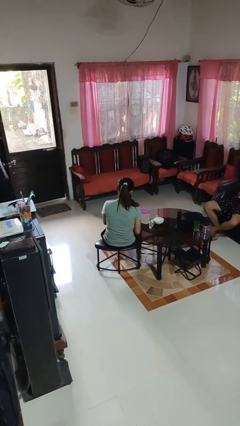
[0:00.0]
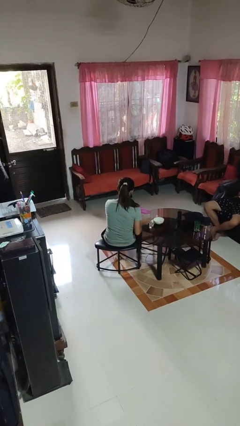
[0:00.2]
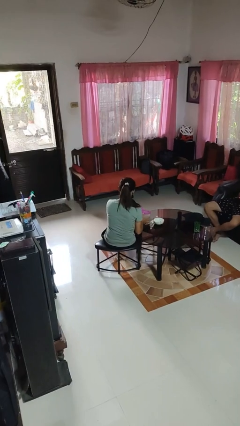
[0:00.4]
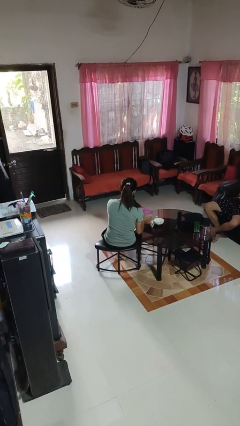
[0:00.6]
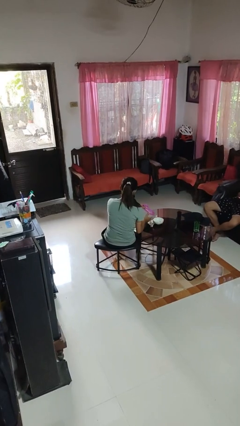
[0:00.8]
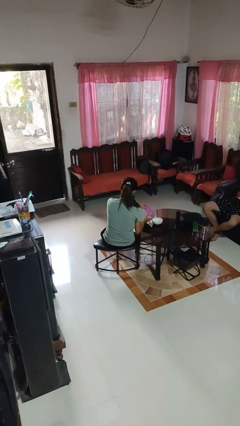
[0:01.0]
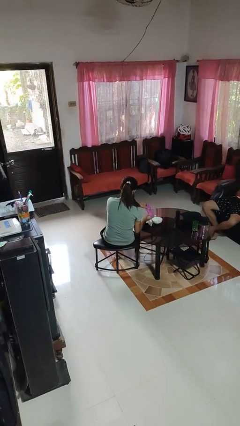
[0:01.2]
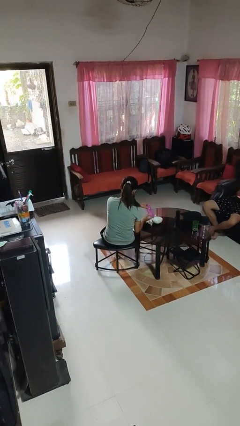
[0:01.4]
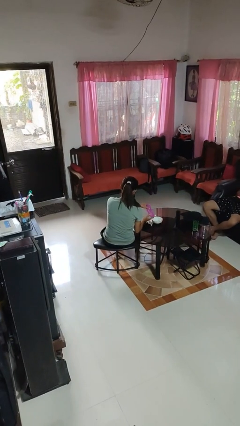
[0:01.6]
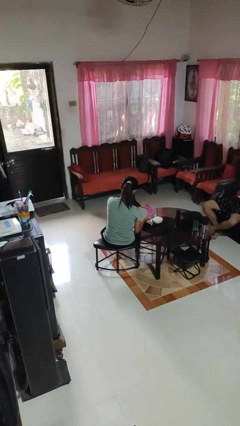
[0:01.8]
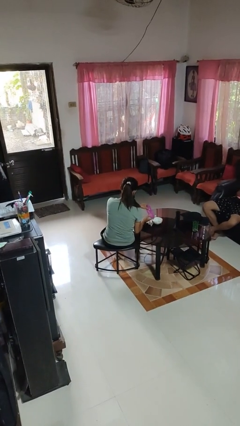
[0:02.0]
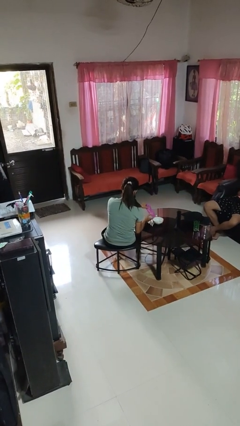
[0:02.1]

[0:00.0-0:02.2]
person pours into bowl

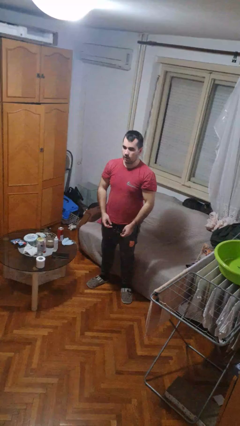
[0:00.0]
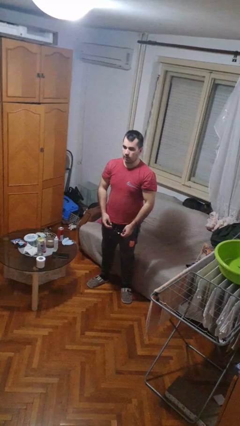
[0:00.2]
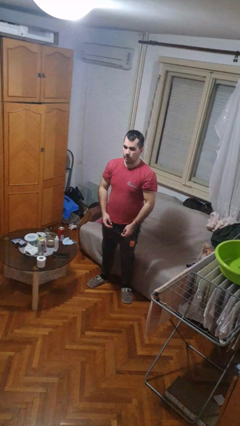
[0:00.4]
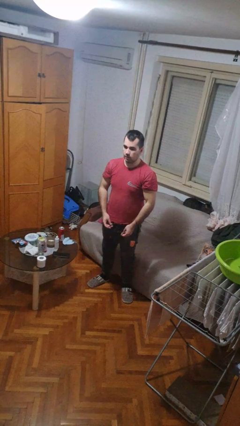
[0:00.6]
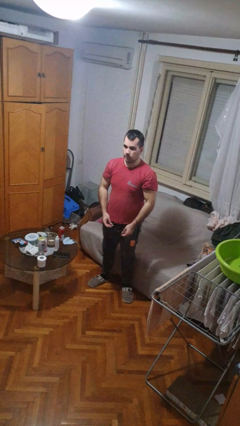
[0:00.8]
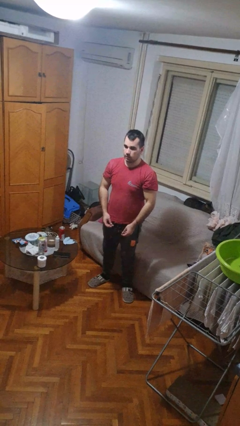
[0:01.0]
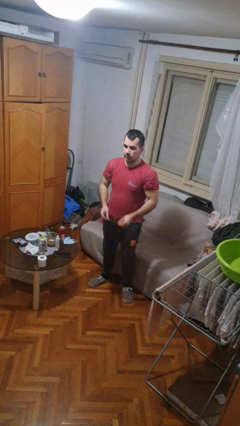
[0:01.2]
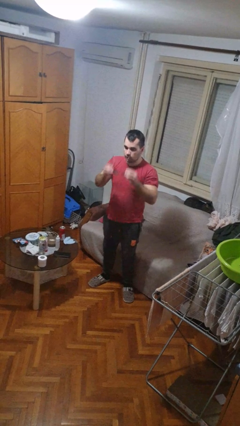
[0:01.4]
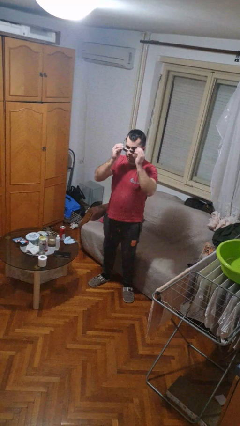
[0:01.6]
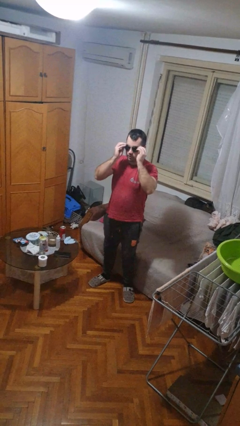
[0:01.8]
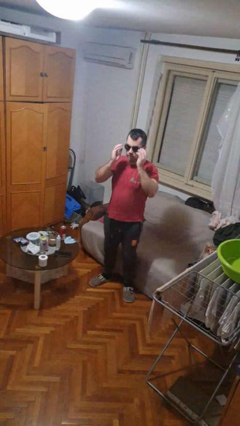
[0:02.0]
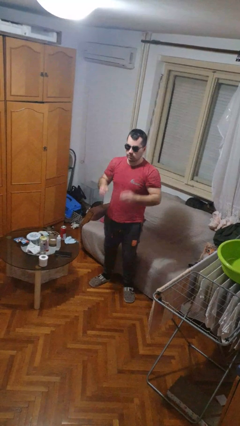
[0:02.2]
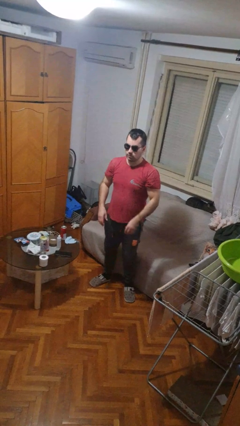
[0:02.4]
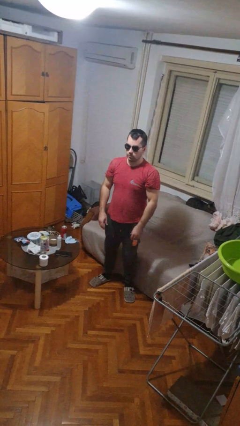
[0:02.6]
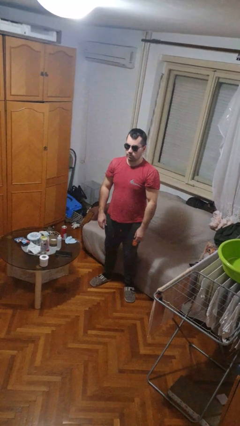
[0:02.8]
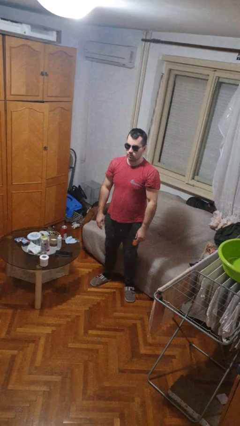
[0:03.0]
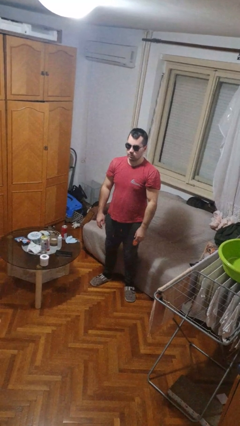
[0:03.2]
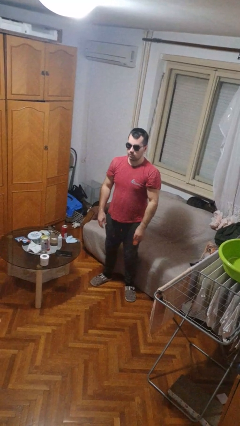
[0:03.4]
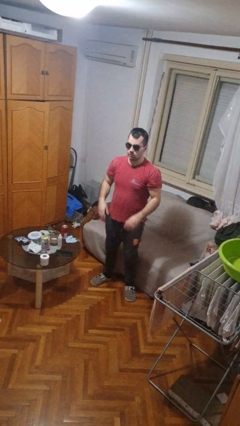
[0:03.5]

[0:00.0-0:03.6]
person puts on sunglasses

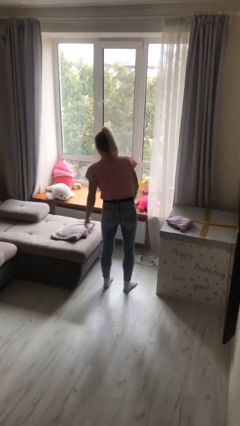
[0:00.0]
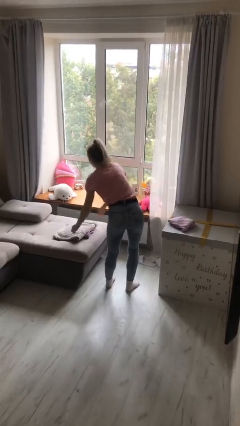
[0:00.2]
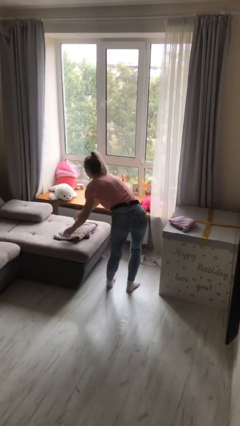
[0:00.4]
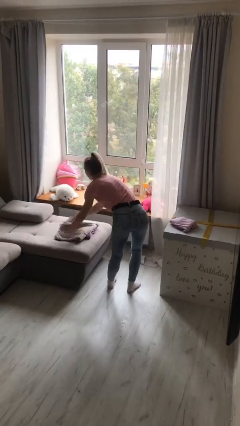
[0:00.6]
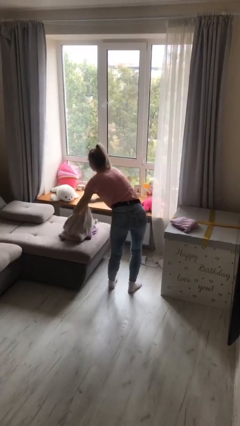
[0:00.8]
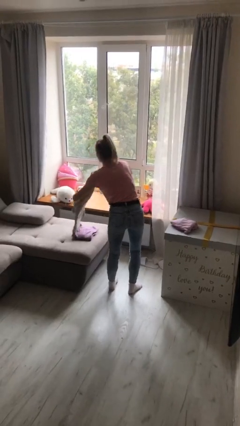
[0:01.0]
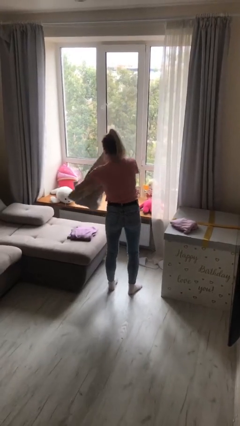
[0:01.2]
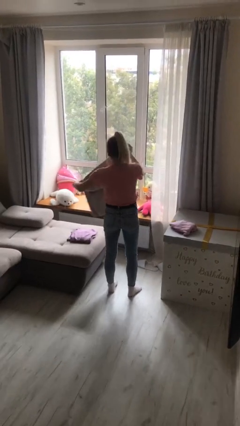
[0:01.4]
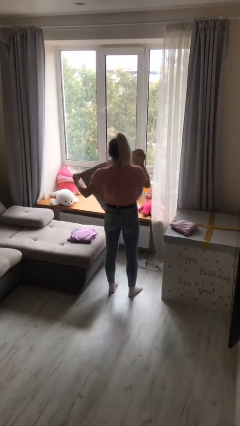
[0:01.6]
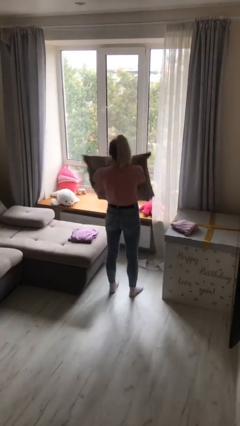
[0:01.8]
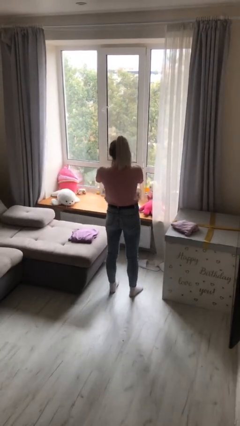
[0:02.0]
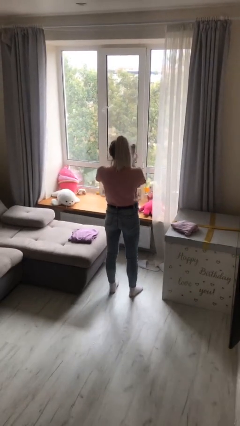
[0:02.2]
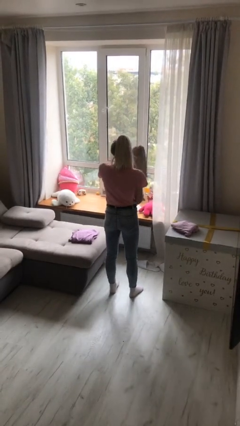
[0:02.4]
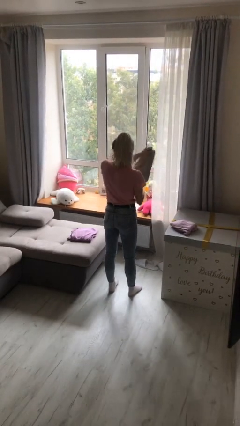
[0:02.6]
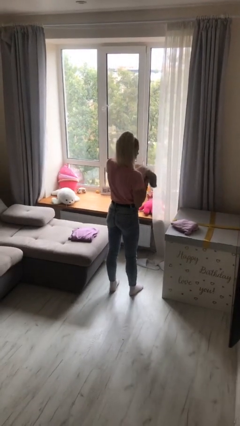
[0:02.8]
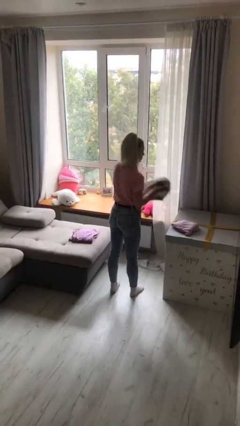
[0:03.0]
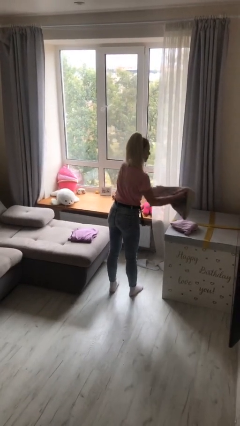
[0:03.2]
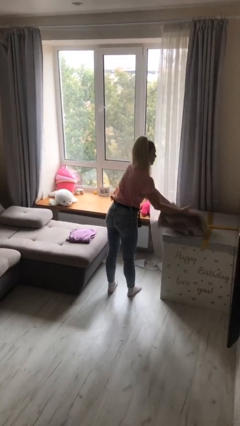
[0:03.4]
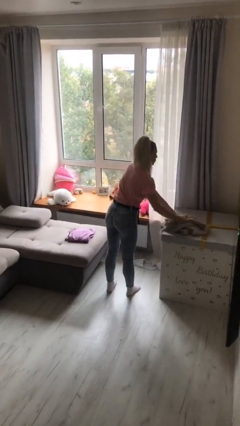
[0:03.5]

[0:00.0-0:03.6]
person folds towel

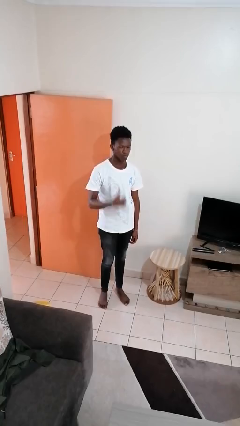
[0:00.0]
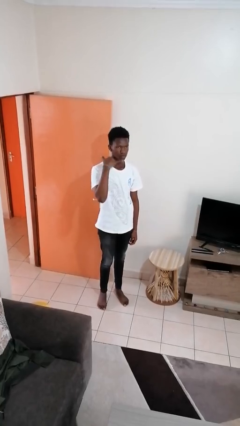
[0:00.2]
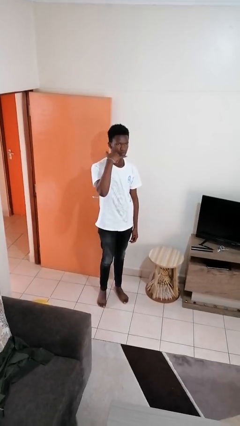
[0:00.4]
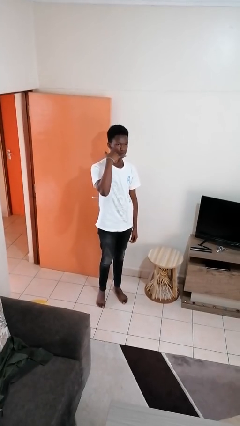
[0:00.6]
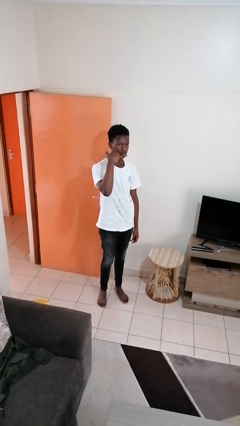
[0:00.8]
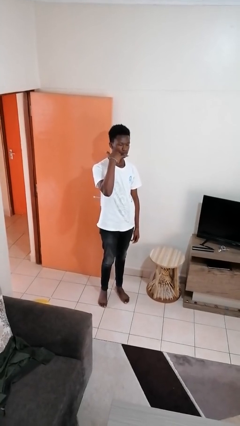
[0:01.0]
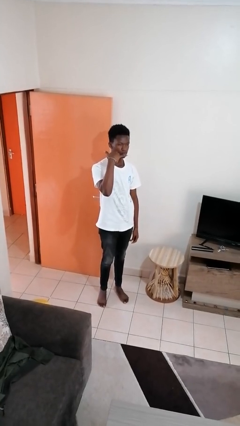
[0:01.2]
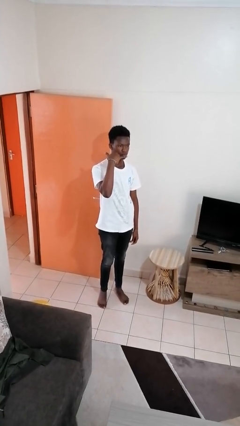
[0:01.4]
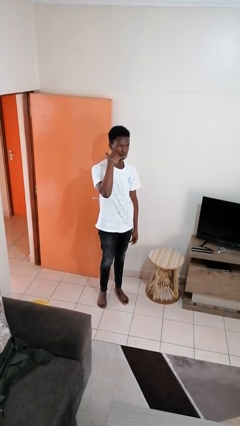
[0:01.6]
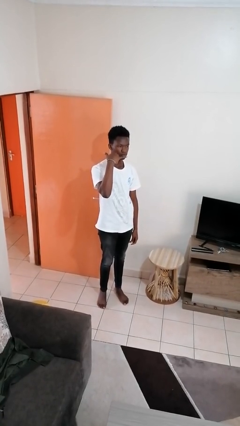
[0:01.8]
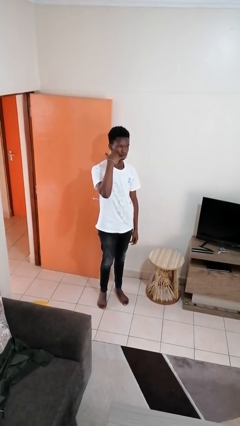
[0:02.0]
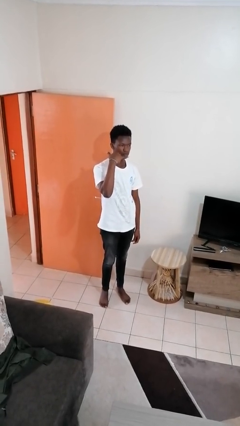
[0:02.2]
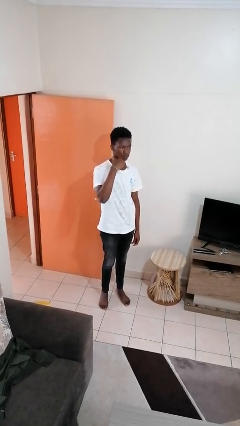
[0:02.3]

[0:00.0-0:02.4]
person gestures call me

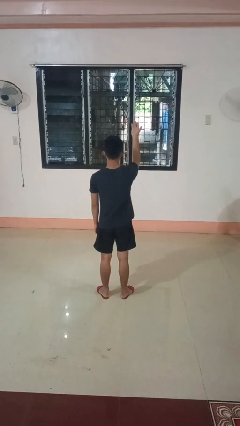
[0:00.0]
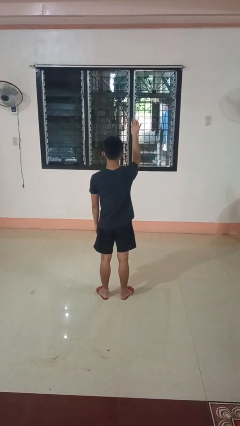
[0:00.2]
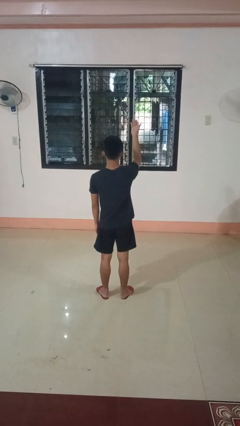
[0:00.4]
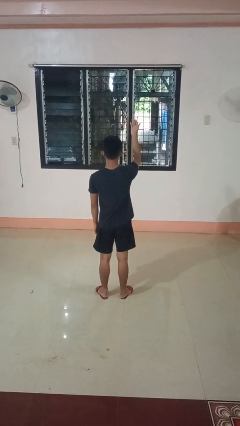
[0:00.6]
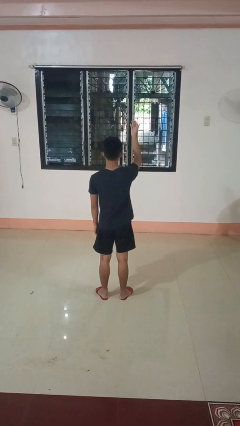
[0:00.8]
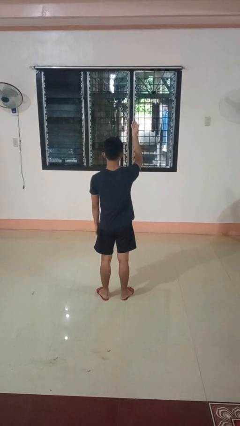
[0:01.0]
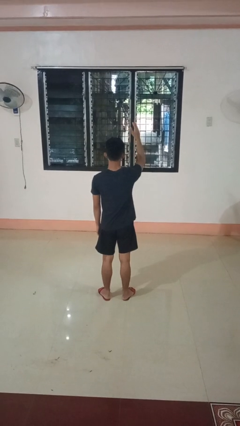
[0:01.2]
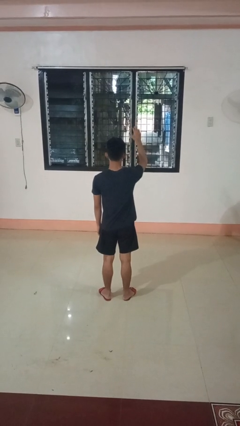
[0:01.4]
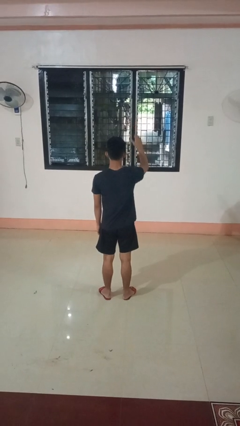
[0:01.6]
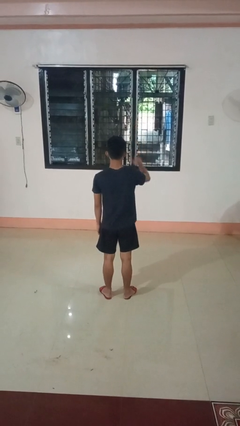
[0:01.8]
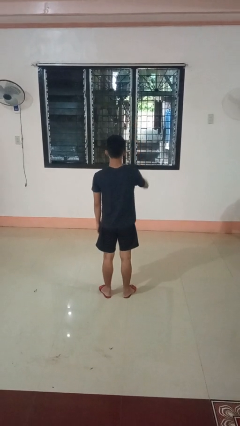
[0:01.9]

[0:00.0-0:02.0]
person gestures swipe up

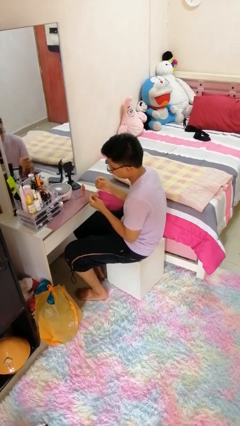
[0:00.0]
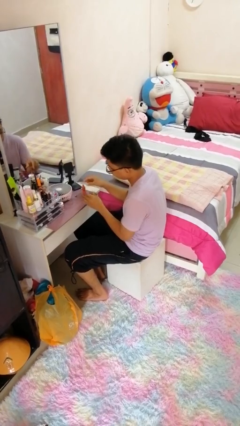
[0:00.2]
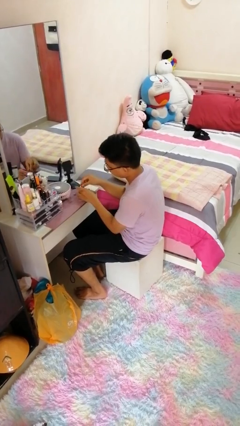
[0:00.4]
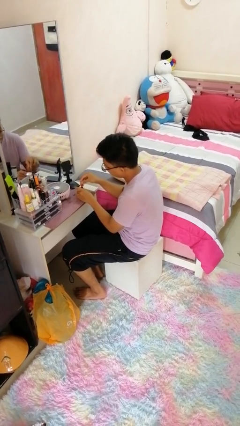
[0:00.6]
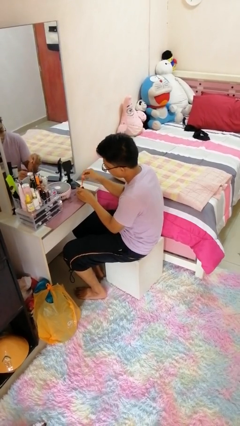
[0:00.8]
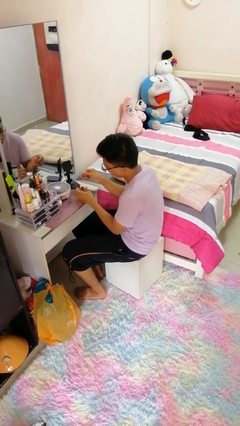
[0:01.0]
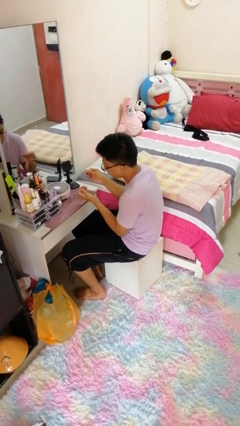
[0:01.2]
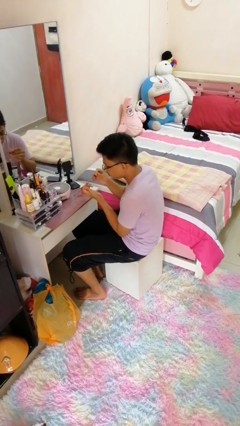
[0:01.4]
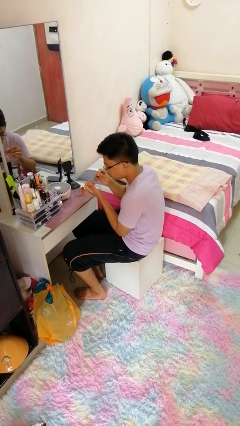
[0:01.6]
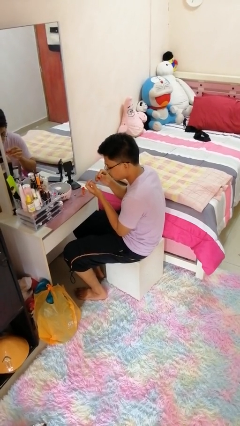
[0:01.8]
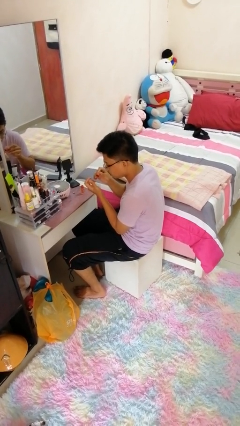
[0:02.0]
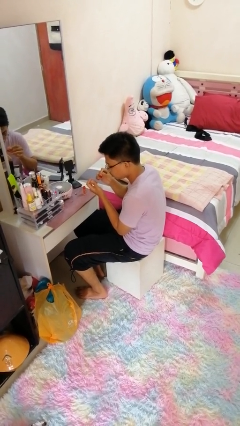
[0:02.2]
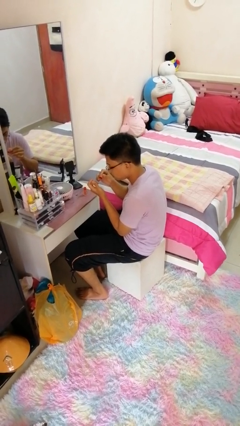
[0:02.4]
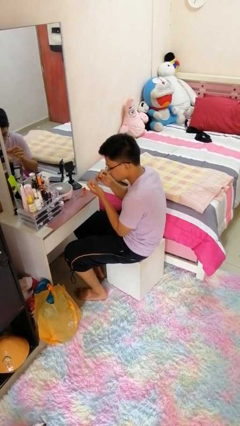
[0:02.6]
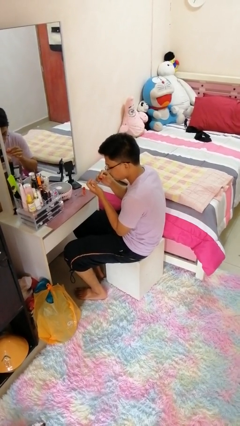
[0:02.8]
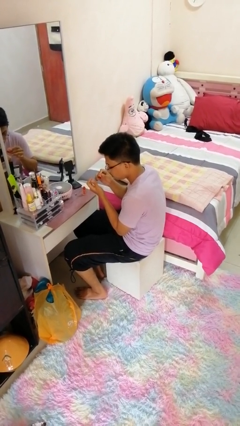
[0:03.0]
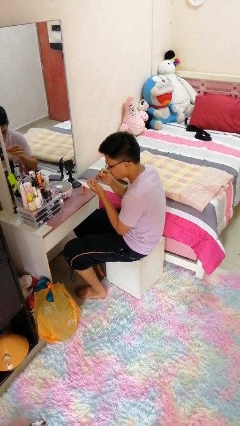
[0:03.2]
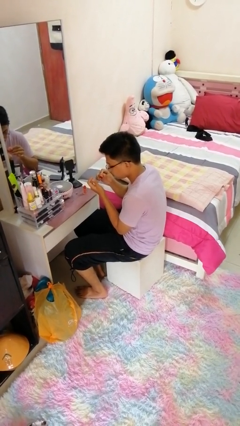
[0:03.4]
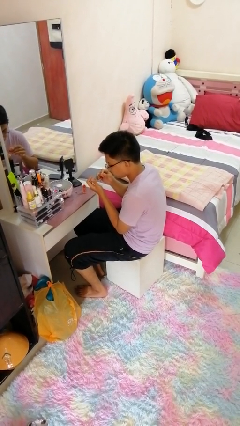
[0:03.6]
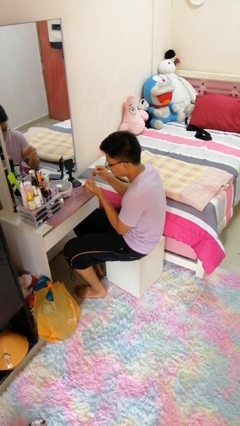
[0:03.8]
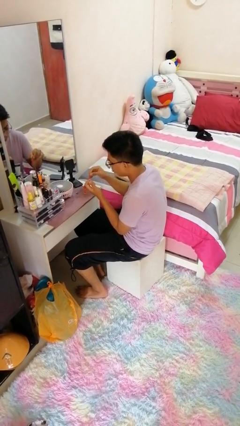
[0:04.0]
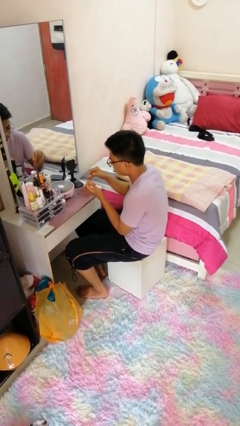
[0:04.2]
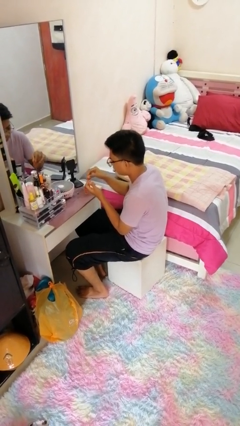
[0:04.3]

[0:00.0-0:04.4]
person paints fingernails
